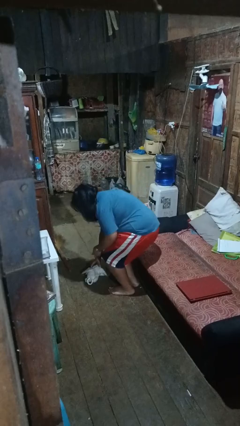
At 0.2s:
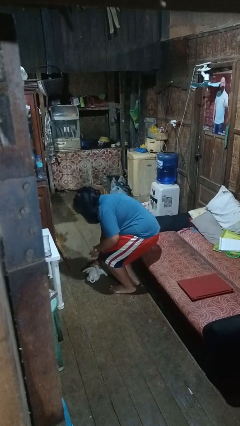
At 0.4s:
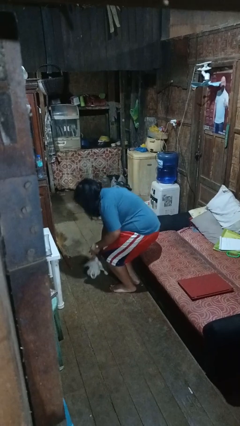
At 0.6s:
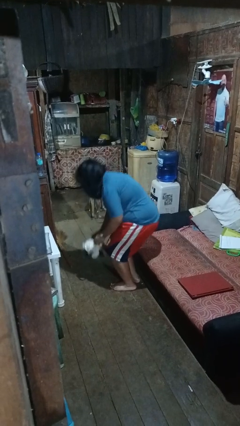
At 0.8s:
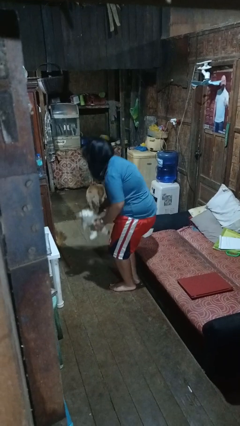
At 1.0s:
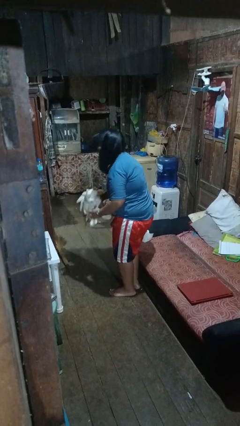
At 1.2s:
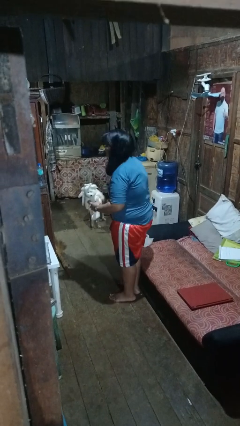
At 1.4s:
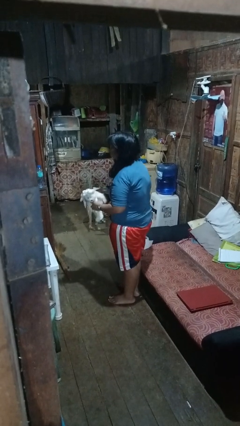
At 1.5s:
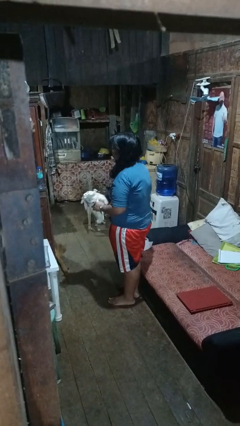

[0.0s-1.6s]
person picks up object from floor

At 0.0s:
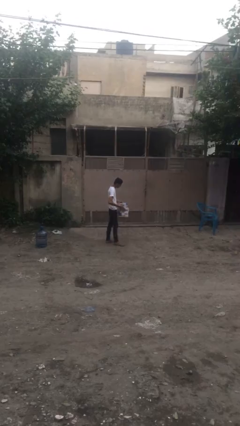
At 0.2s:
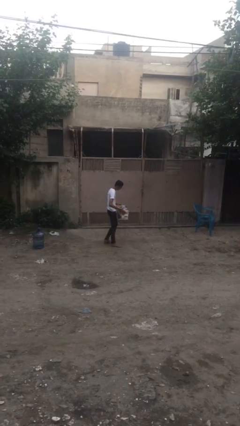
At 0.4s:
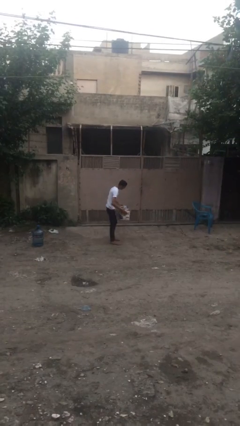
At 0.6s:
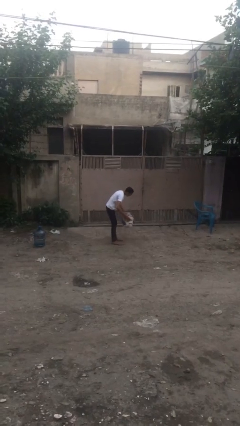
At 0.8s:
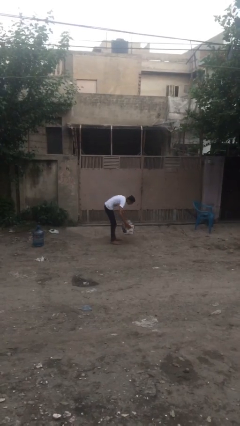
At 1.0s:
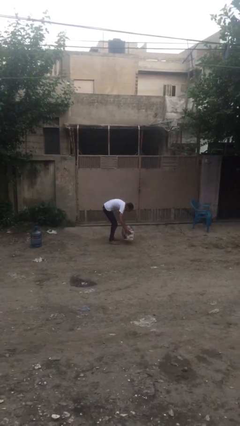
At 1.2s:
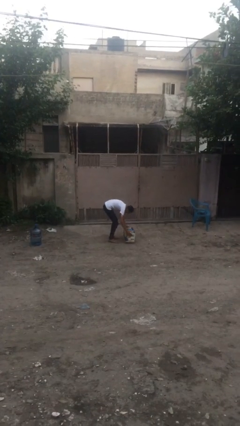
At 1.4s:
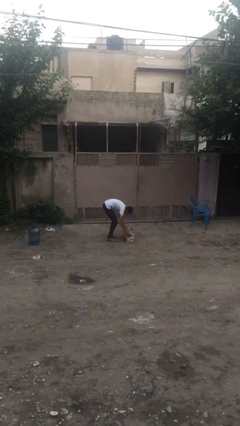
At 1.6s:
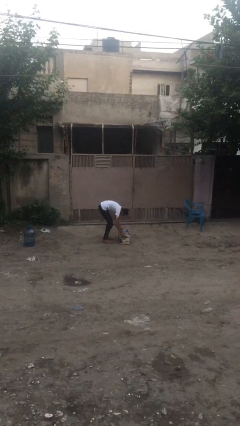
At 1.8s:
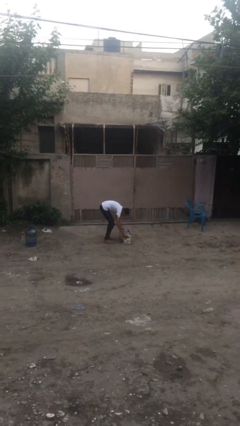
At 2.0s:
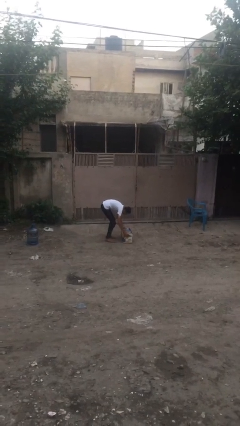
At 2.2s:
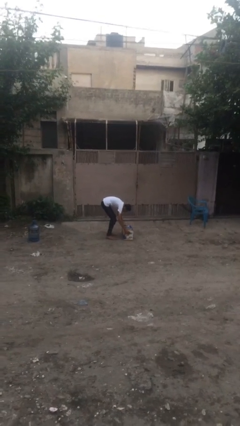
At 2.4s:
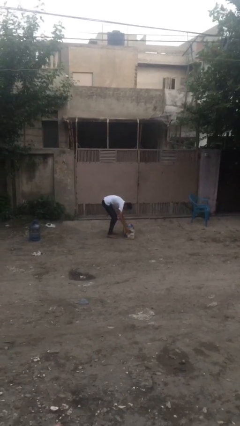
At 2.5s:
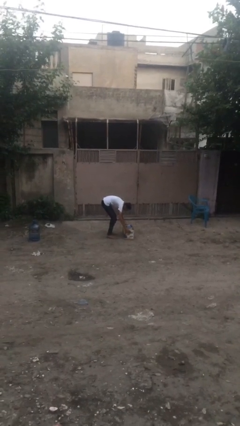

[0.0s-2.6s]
person puts down object on floor

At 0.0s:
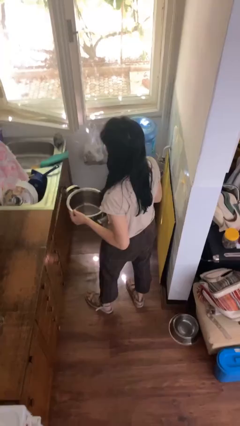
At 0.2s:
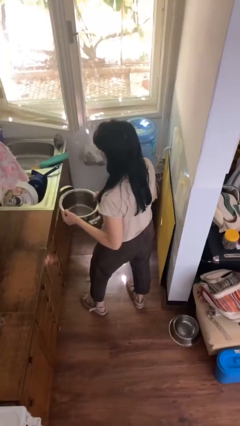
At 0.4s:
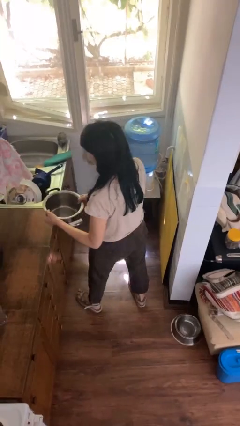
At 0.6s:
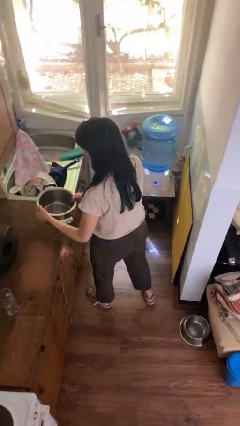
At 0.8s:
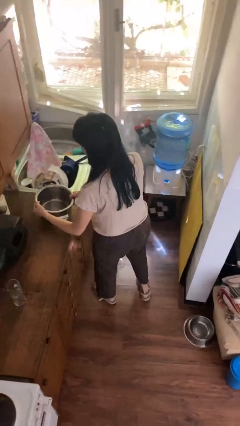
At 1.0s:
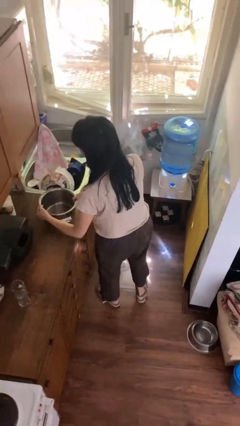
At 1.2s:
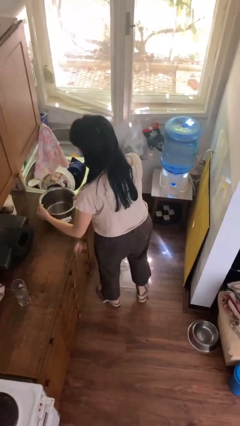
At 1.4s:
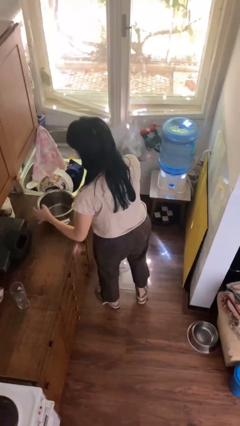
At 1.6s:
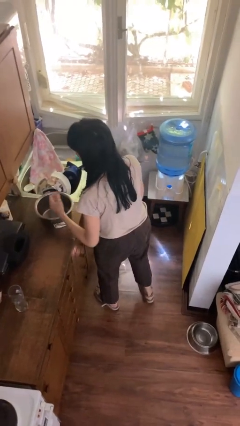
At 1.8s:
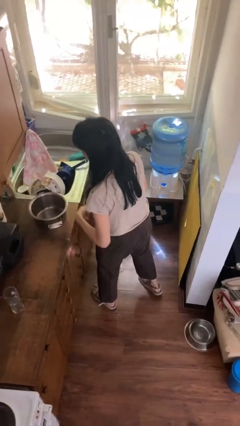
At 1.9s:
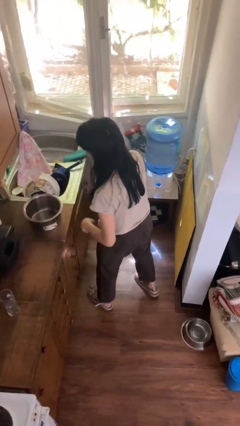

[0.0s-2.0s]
person puts down object on countertop

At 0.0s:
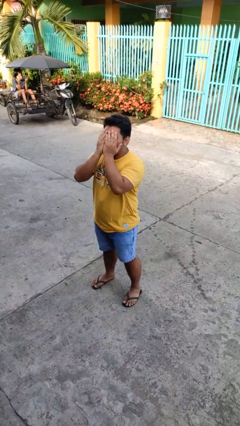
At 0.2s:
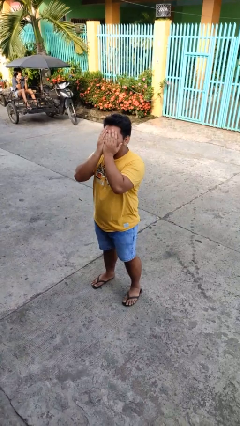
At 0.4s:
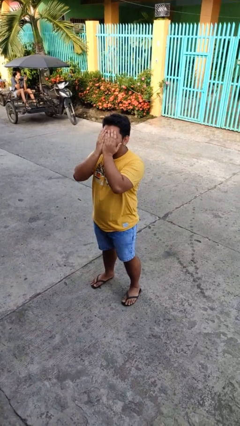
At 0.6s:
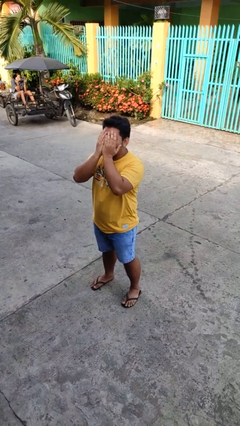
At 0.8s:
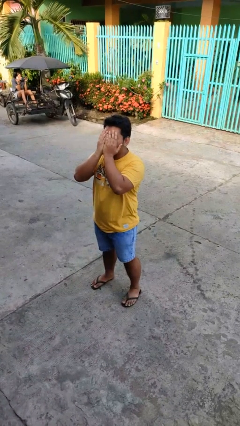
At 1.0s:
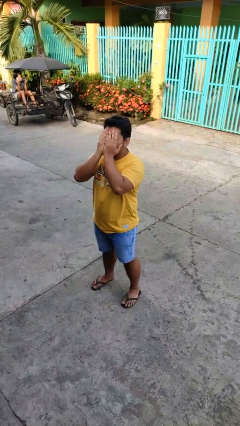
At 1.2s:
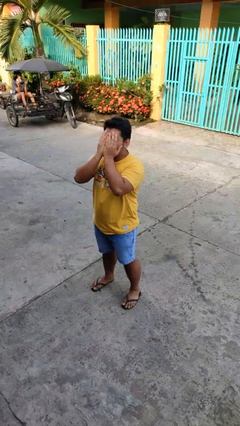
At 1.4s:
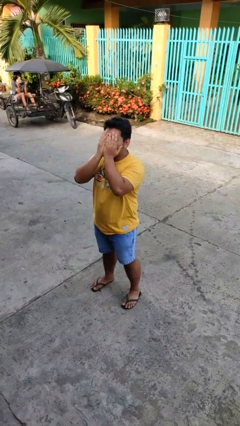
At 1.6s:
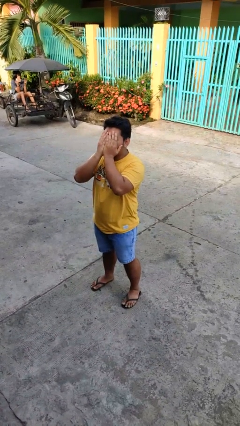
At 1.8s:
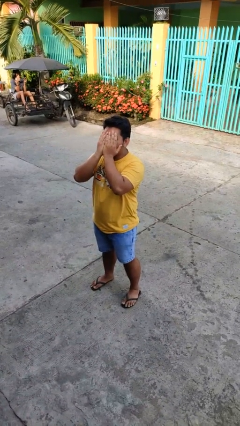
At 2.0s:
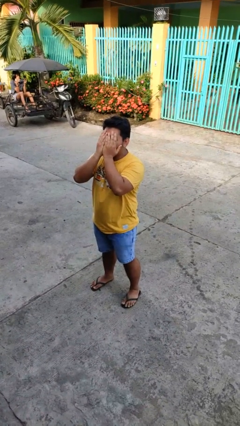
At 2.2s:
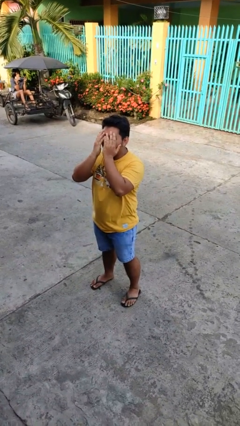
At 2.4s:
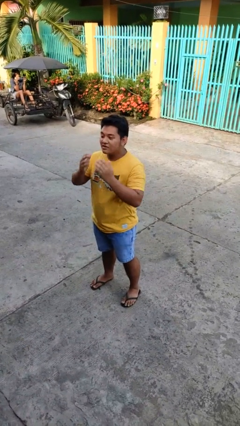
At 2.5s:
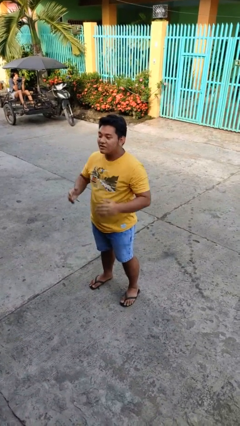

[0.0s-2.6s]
person covers face with hands

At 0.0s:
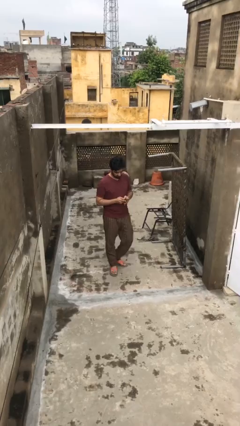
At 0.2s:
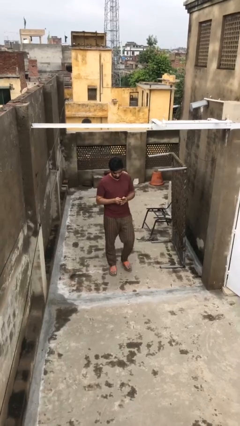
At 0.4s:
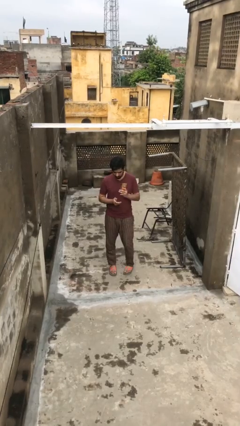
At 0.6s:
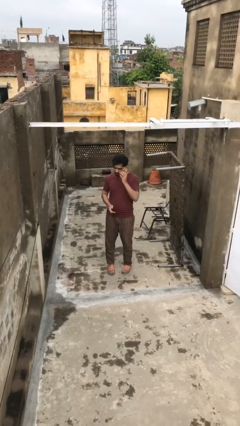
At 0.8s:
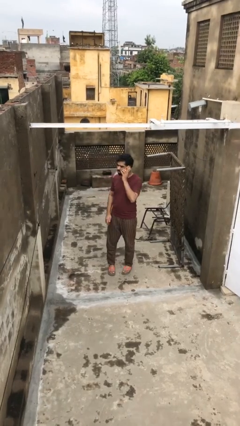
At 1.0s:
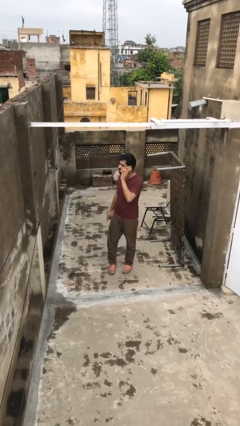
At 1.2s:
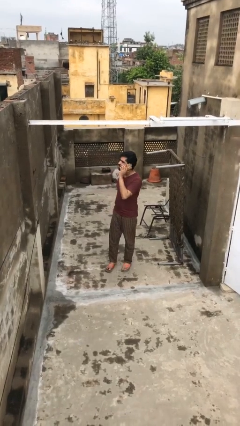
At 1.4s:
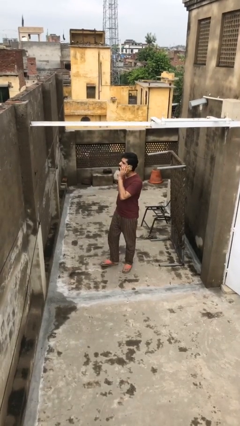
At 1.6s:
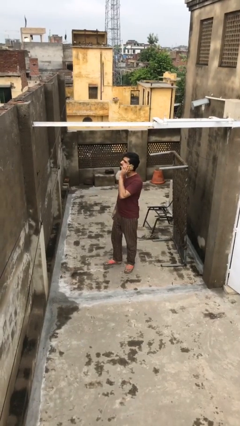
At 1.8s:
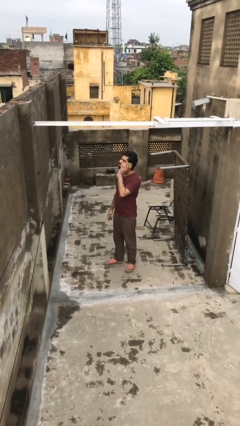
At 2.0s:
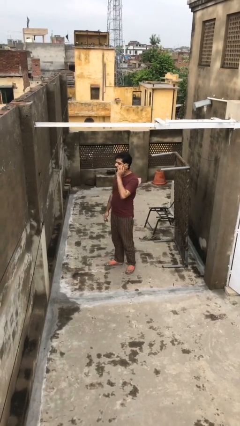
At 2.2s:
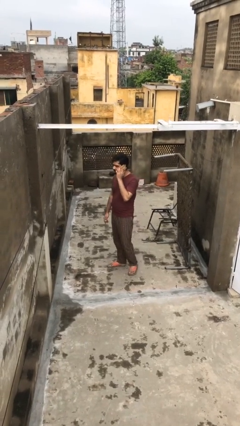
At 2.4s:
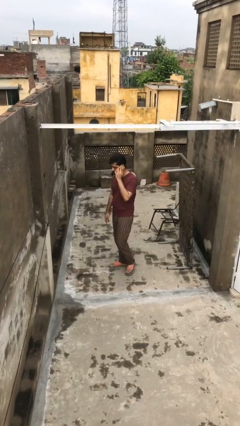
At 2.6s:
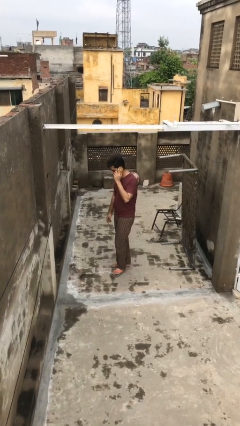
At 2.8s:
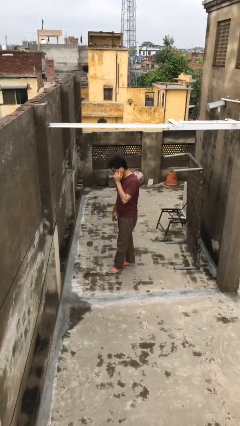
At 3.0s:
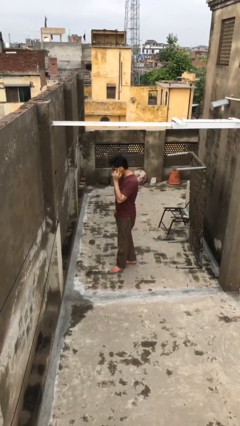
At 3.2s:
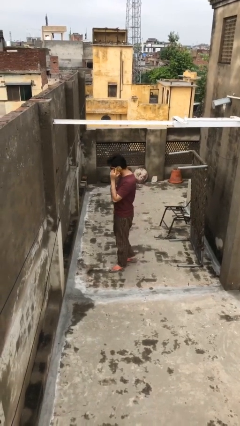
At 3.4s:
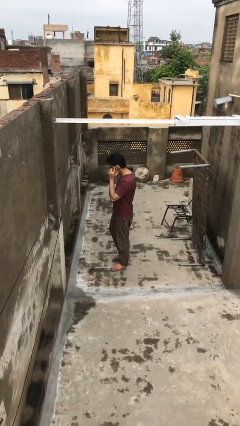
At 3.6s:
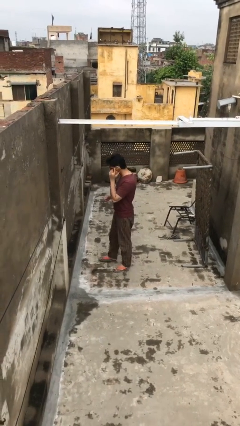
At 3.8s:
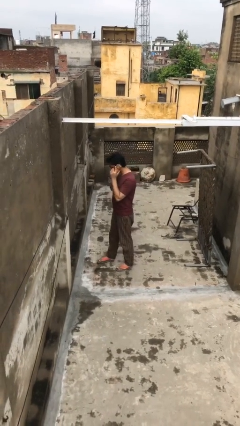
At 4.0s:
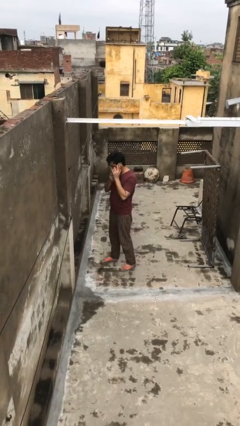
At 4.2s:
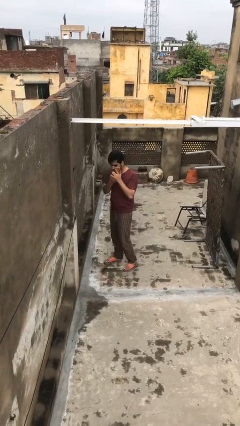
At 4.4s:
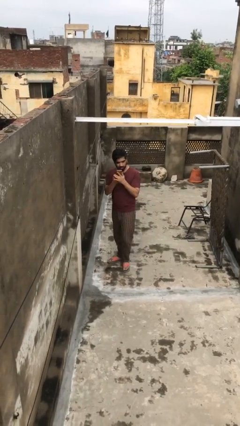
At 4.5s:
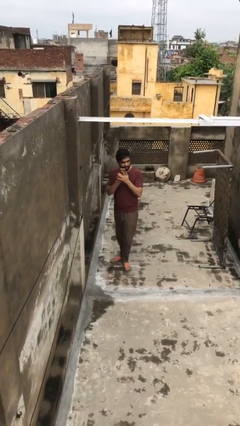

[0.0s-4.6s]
person talks on phone

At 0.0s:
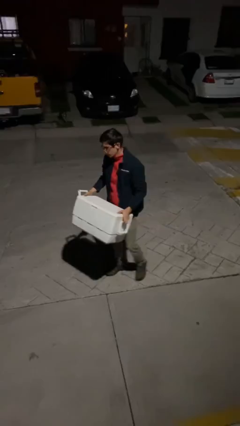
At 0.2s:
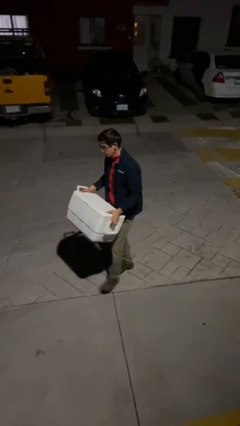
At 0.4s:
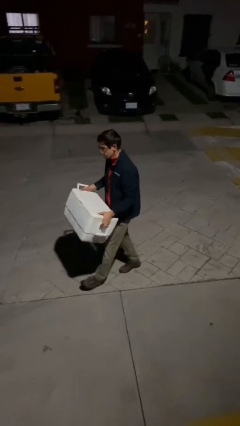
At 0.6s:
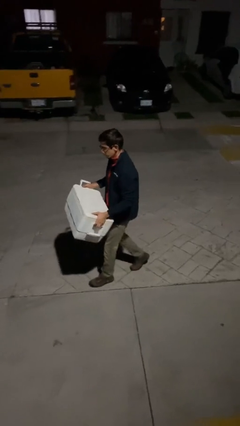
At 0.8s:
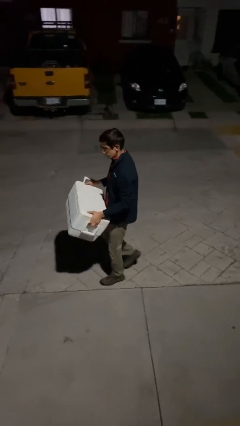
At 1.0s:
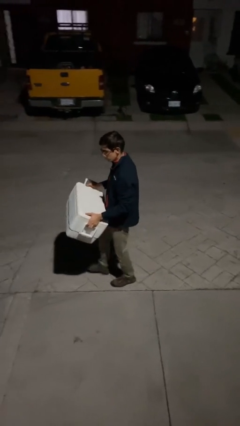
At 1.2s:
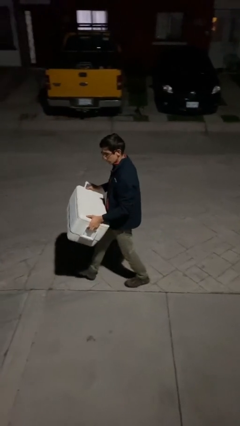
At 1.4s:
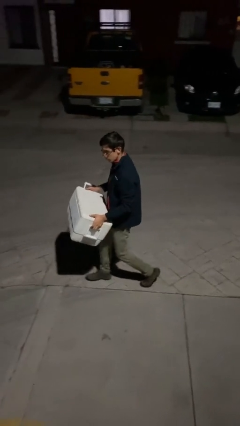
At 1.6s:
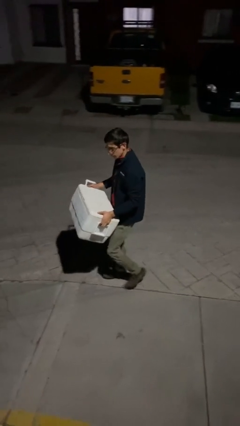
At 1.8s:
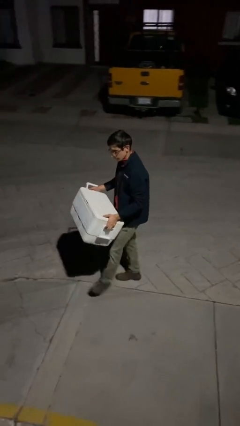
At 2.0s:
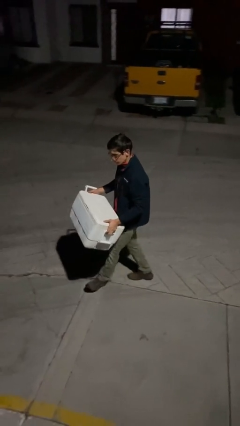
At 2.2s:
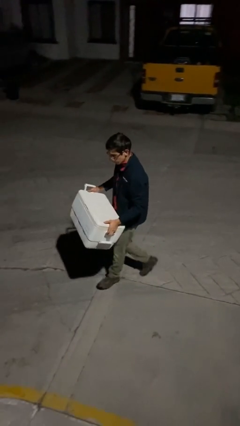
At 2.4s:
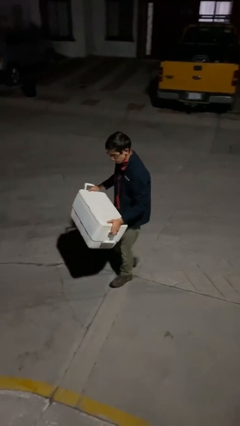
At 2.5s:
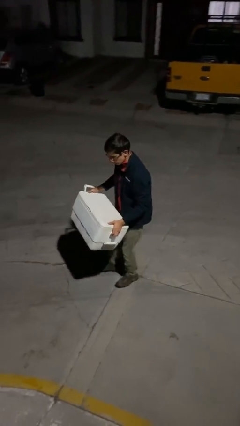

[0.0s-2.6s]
person carries heavy object

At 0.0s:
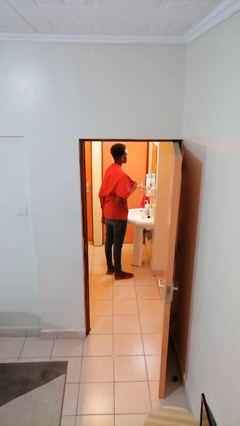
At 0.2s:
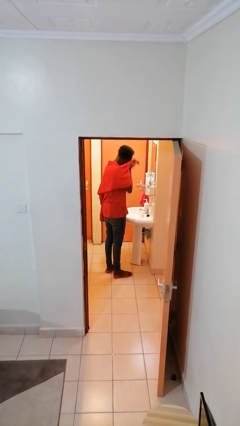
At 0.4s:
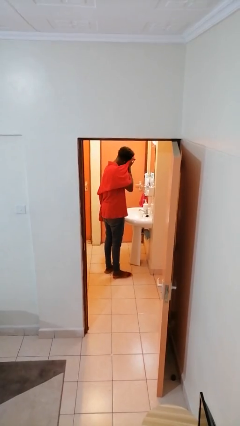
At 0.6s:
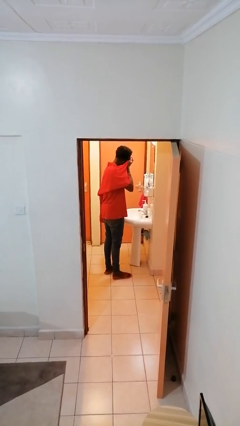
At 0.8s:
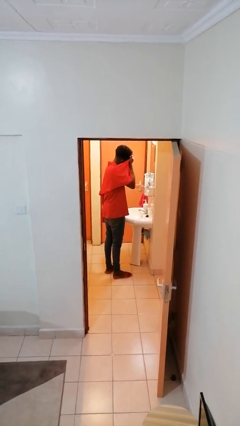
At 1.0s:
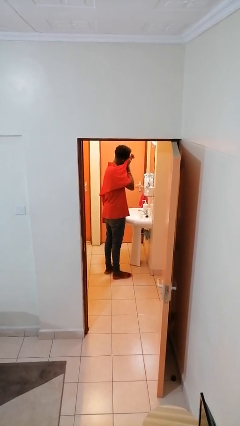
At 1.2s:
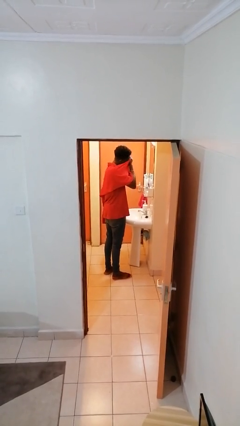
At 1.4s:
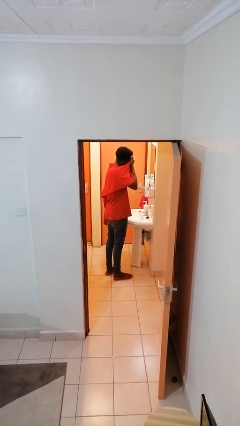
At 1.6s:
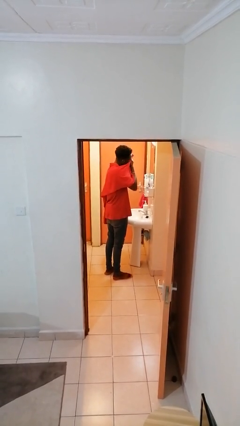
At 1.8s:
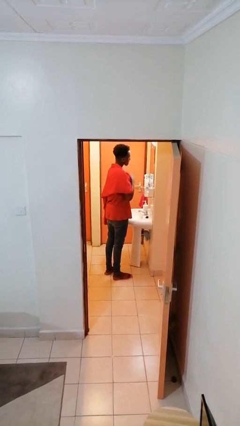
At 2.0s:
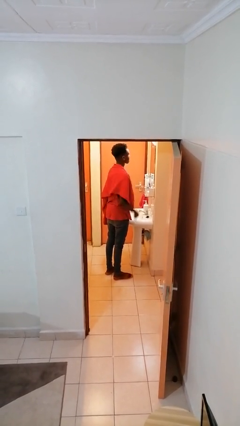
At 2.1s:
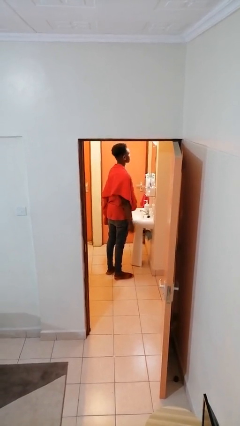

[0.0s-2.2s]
person dries face with towel
